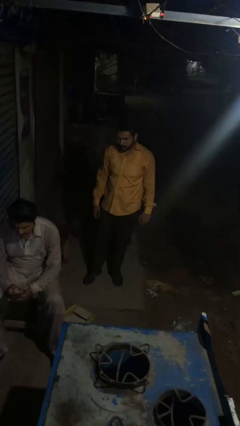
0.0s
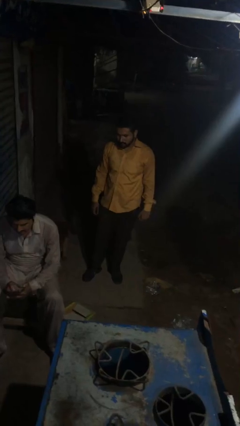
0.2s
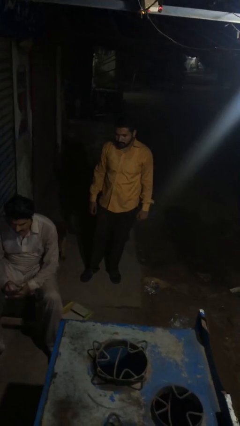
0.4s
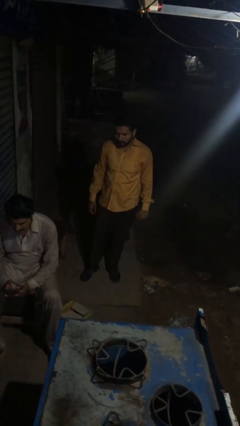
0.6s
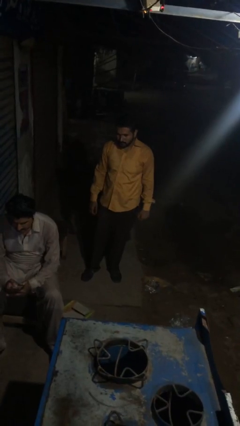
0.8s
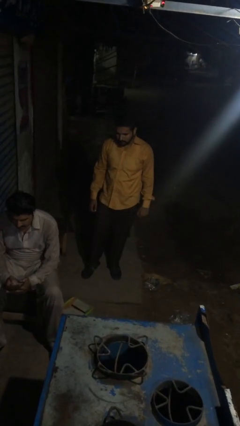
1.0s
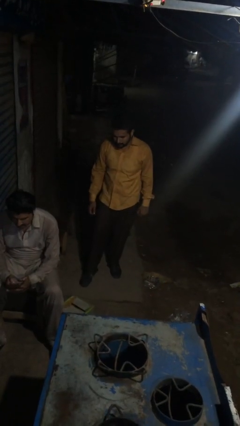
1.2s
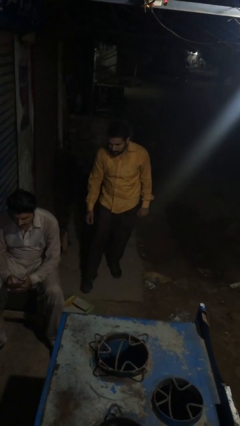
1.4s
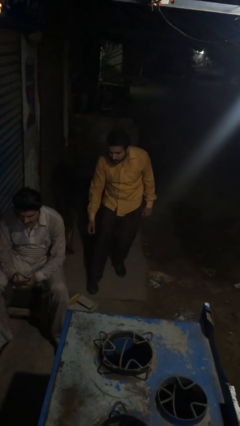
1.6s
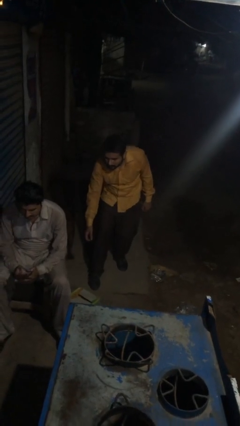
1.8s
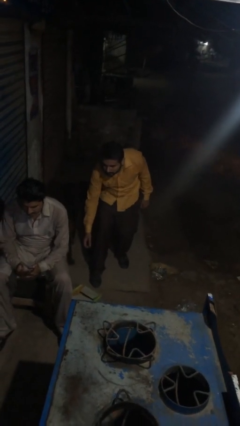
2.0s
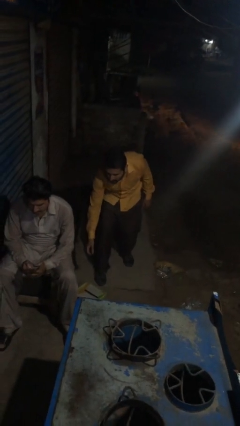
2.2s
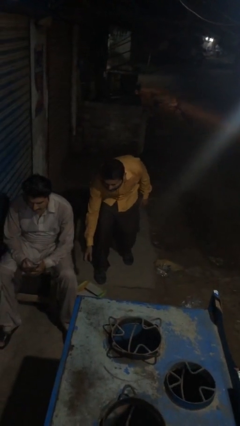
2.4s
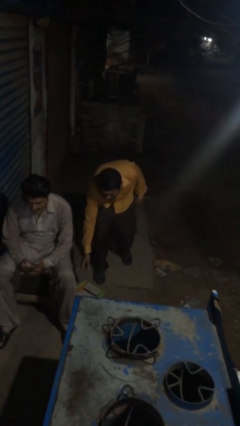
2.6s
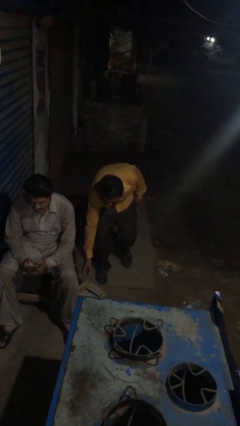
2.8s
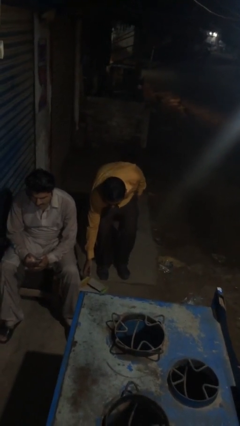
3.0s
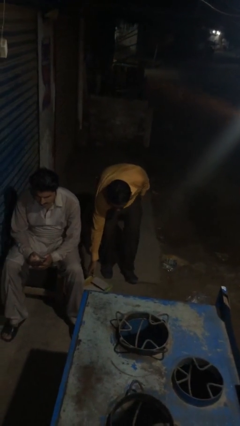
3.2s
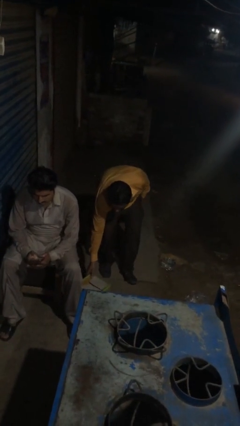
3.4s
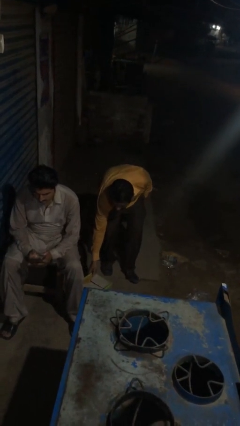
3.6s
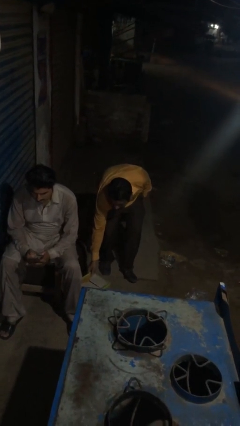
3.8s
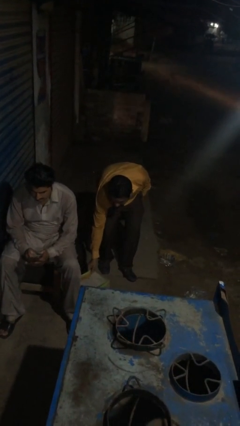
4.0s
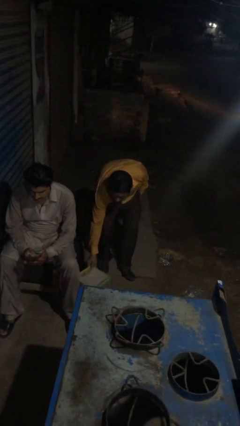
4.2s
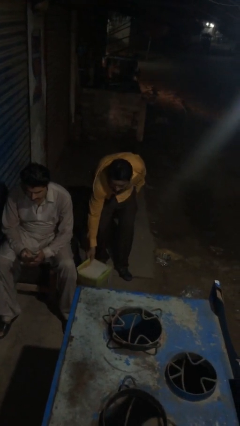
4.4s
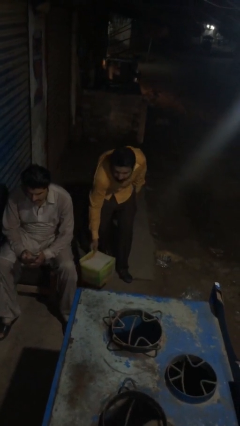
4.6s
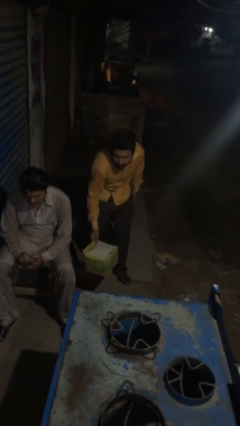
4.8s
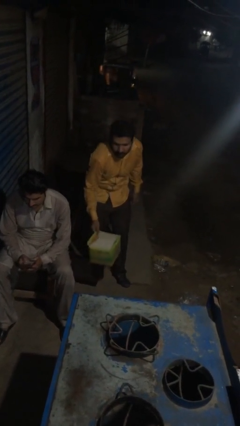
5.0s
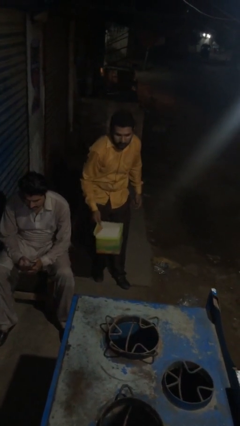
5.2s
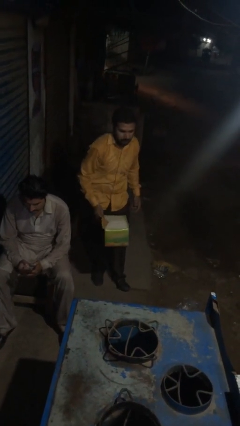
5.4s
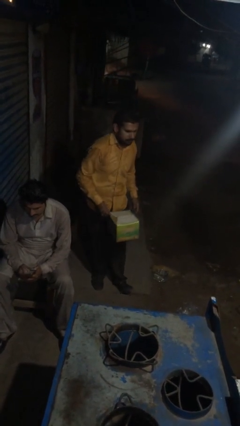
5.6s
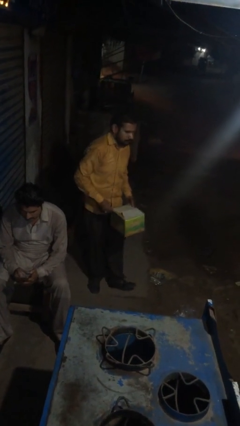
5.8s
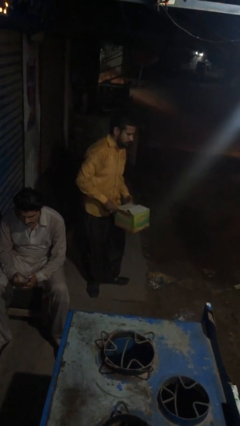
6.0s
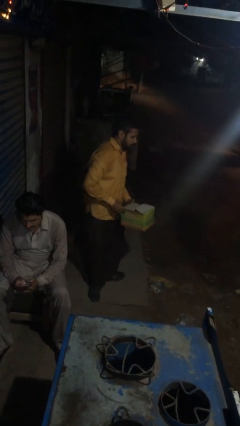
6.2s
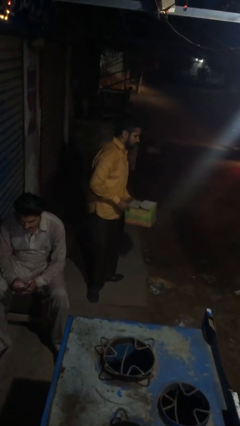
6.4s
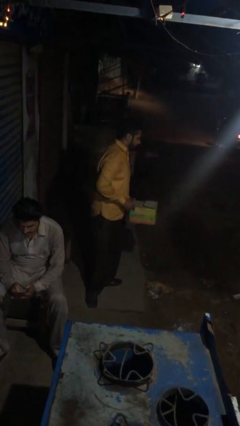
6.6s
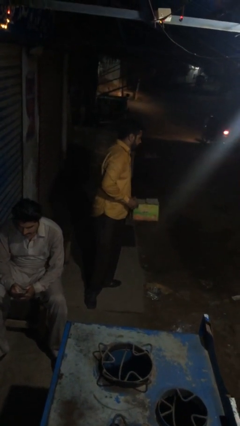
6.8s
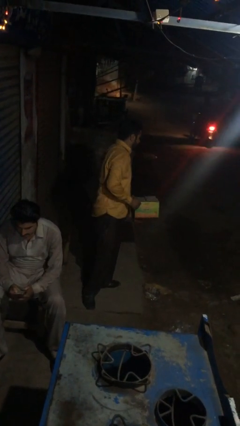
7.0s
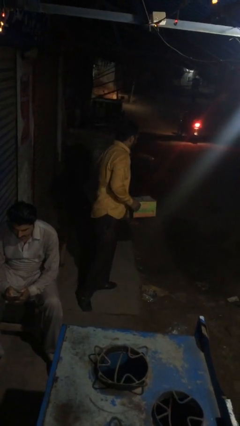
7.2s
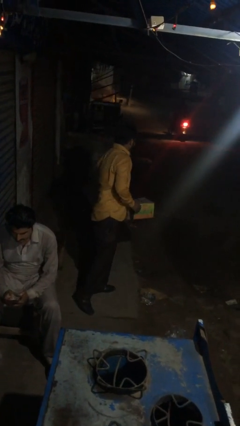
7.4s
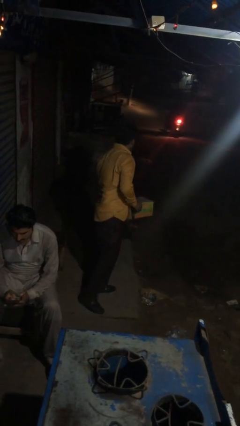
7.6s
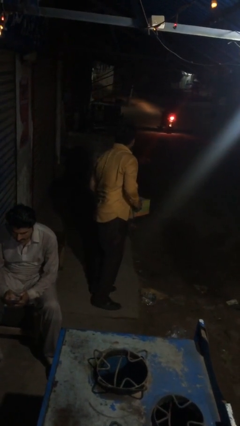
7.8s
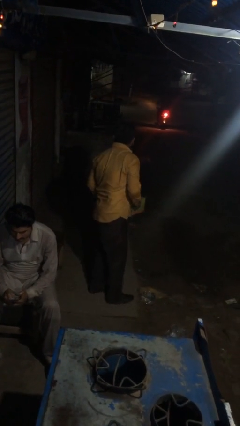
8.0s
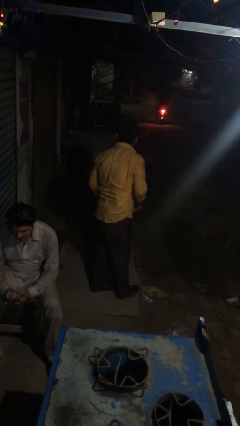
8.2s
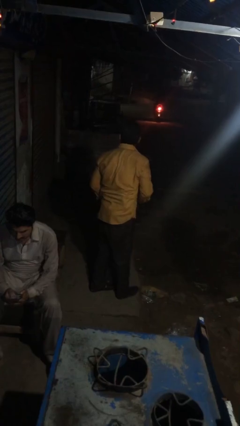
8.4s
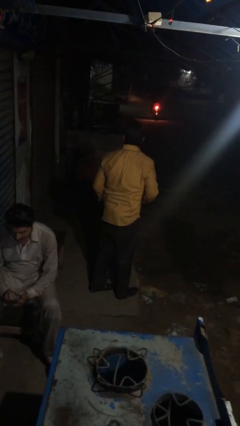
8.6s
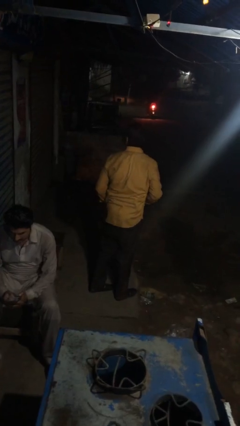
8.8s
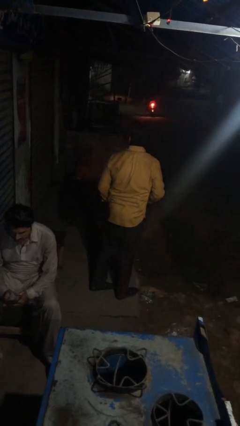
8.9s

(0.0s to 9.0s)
person steals object from person

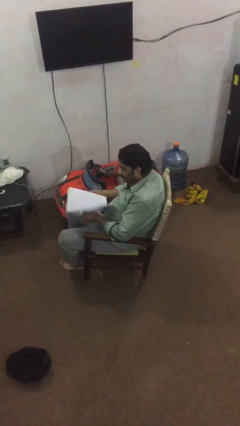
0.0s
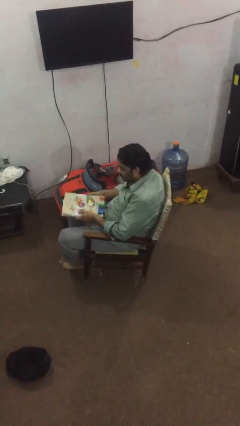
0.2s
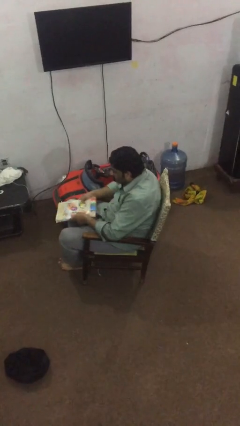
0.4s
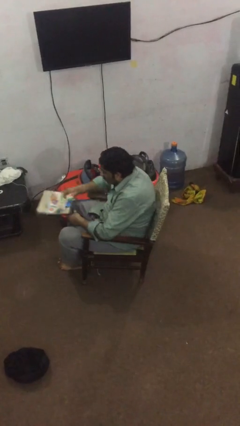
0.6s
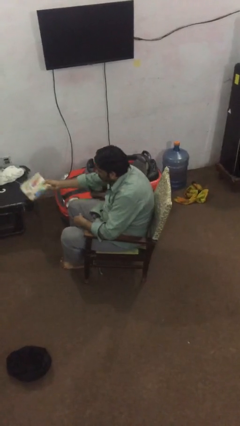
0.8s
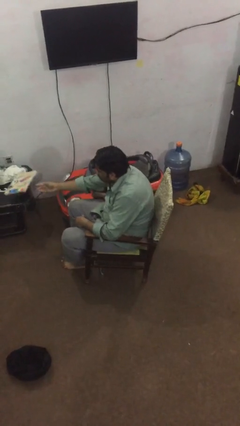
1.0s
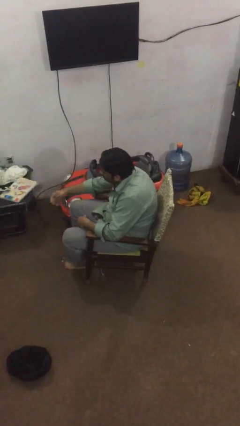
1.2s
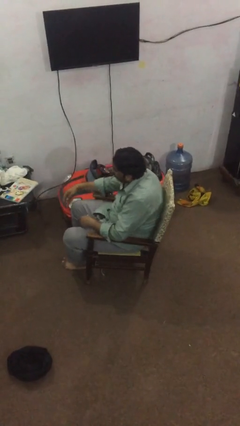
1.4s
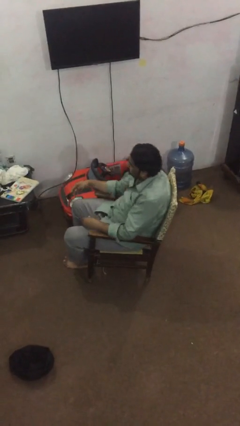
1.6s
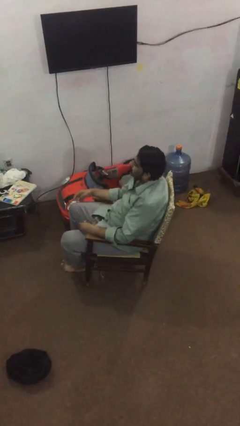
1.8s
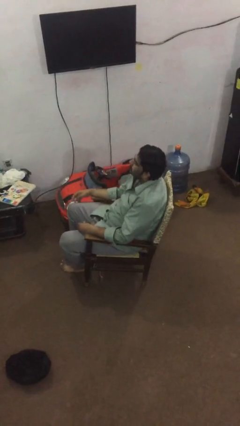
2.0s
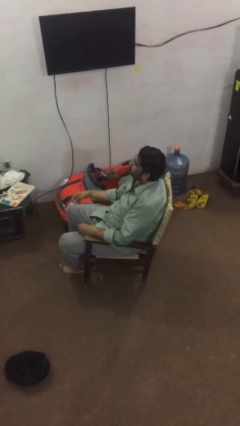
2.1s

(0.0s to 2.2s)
person puts down object on table

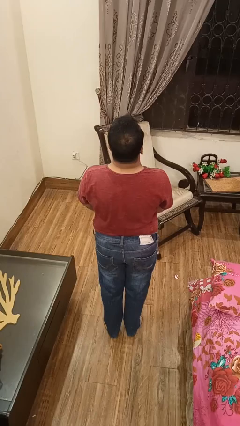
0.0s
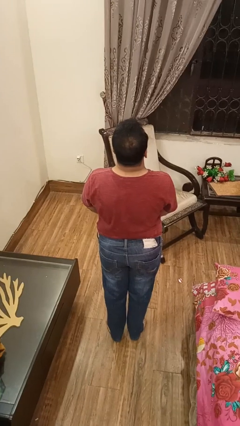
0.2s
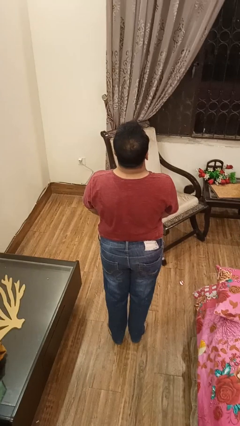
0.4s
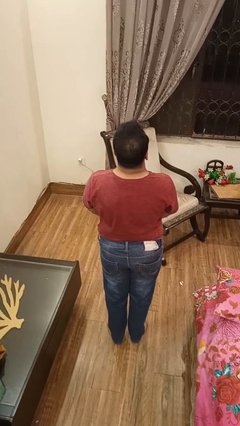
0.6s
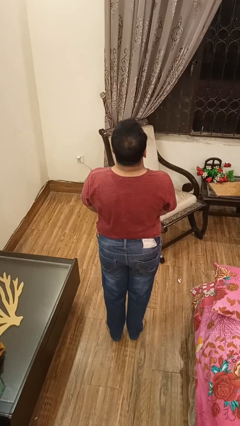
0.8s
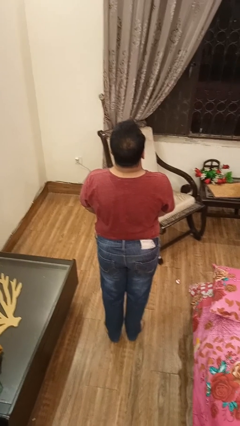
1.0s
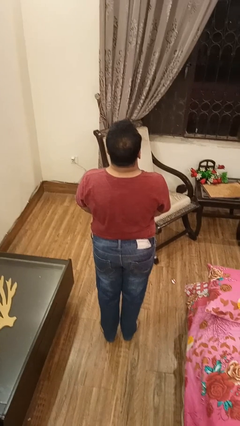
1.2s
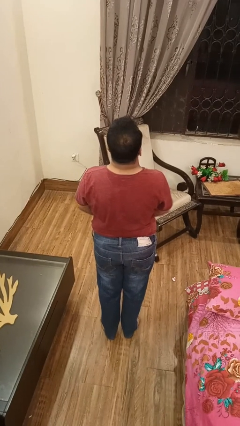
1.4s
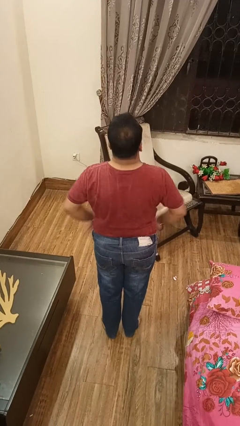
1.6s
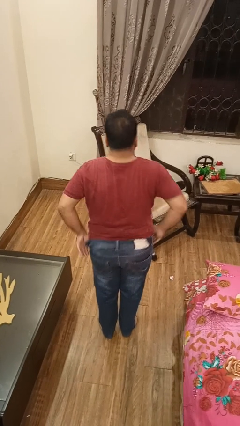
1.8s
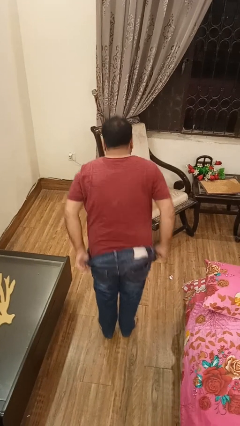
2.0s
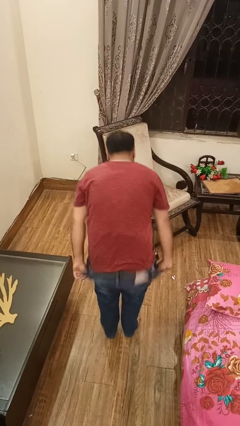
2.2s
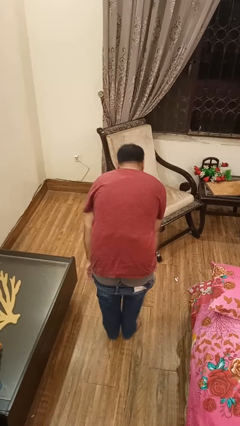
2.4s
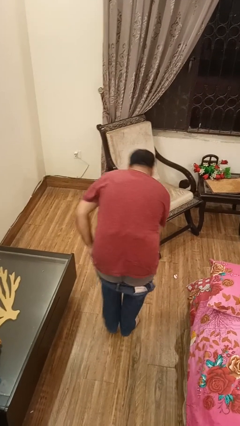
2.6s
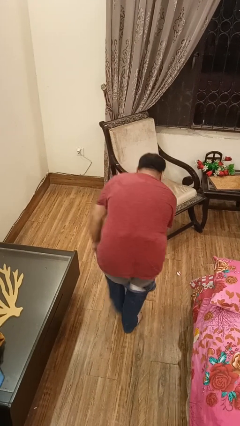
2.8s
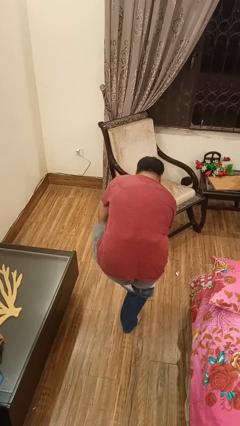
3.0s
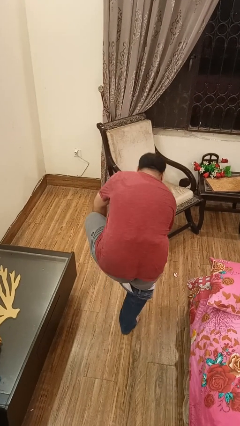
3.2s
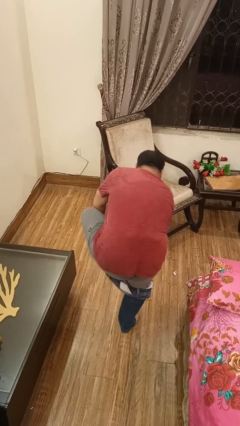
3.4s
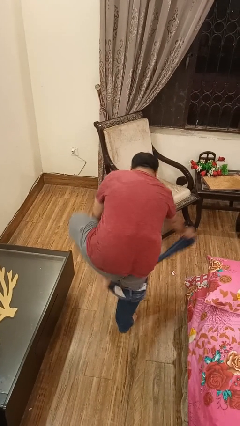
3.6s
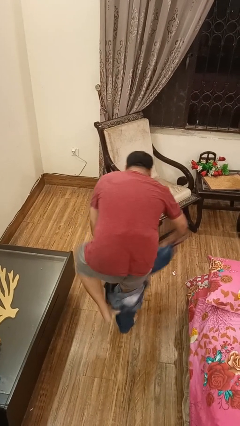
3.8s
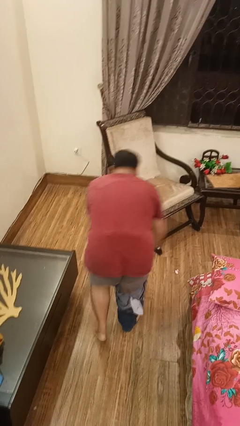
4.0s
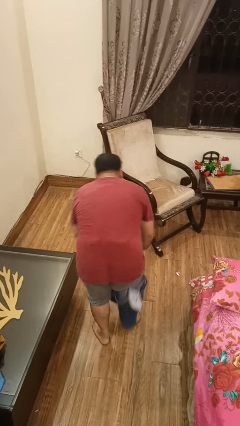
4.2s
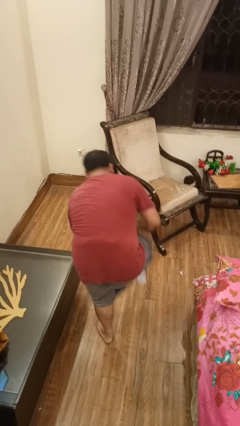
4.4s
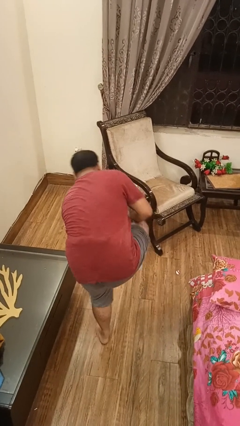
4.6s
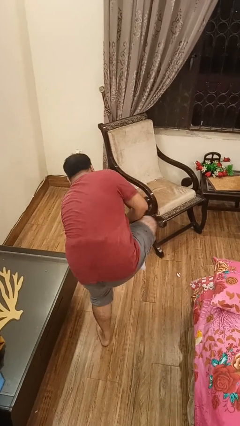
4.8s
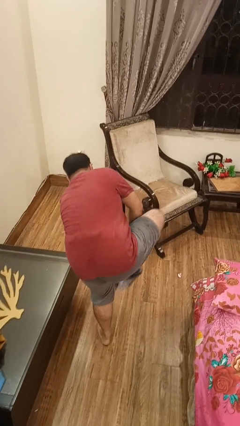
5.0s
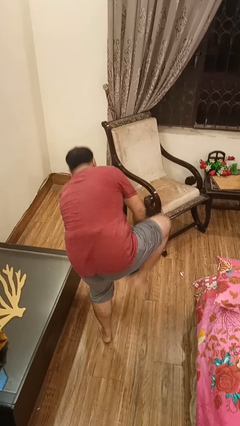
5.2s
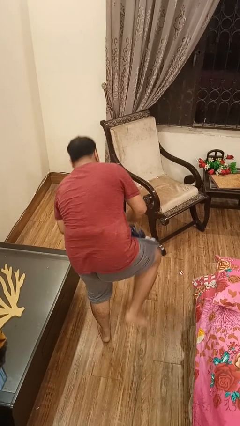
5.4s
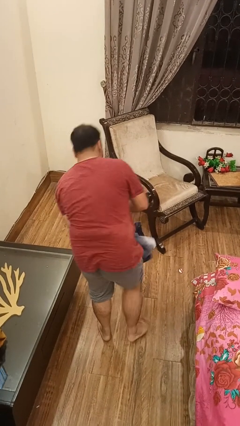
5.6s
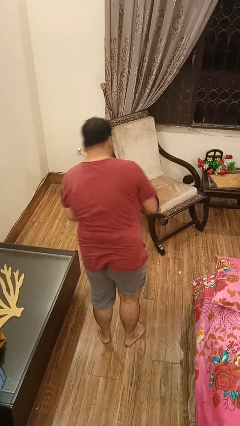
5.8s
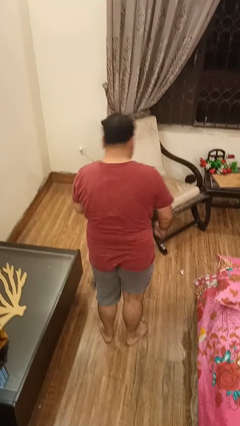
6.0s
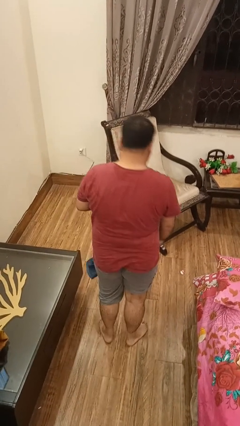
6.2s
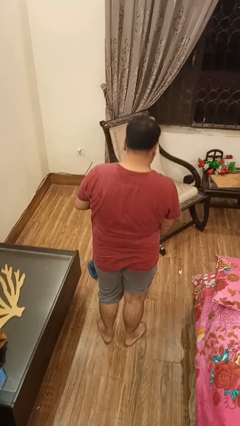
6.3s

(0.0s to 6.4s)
person takes off pants

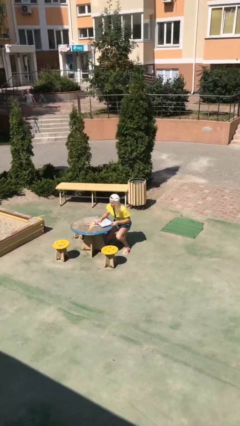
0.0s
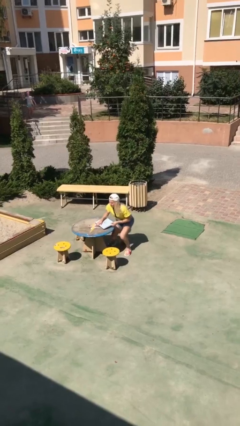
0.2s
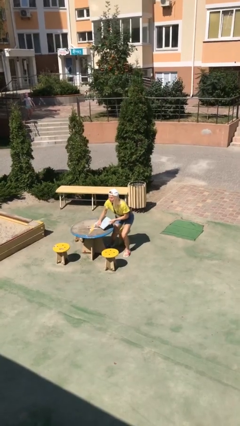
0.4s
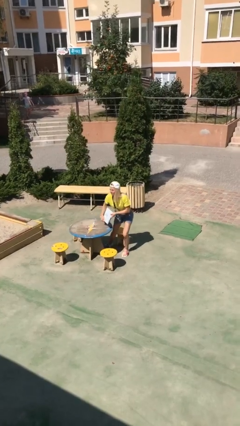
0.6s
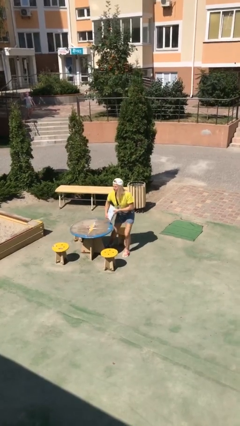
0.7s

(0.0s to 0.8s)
person stands up
